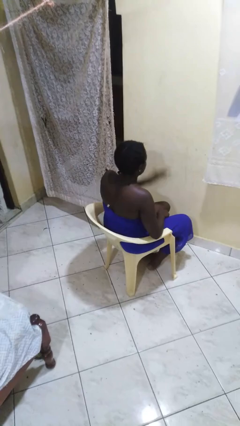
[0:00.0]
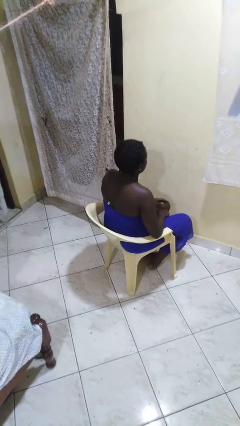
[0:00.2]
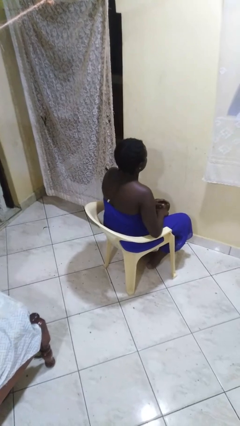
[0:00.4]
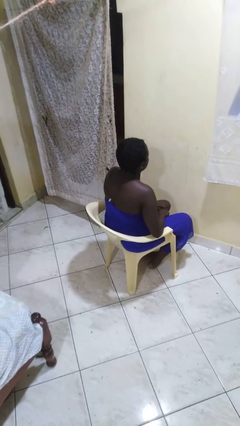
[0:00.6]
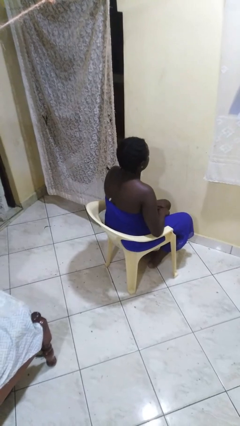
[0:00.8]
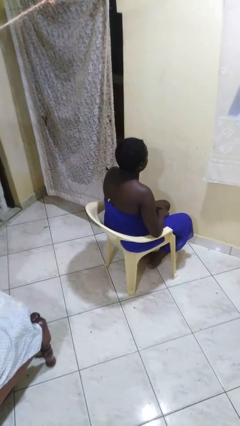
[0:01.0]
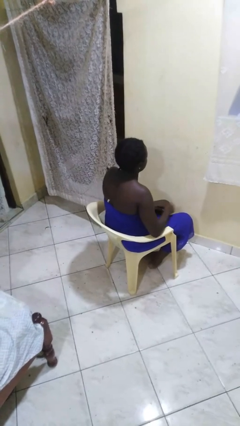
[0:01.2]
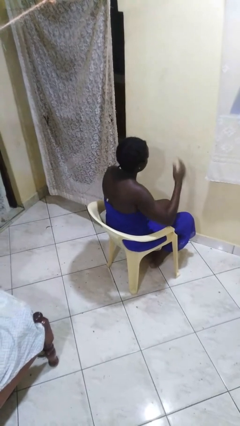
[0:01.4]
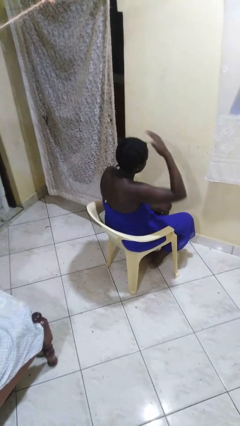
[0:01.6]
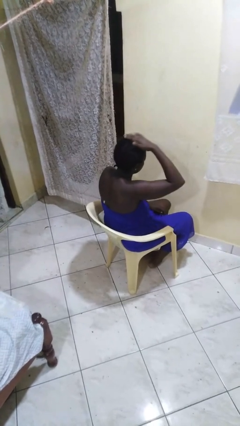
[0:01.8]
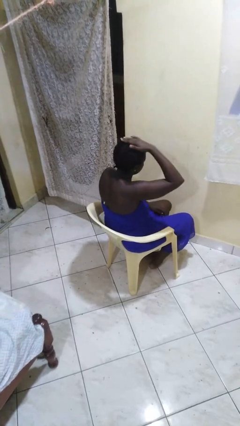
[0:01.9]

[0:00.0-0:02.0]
person pats head

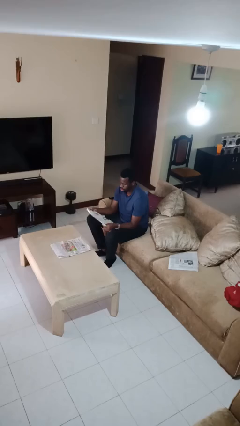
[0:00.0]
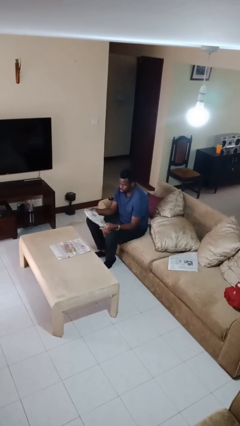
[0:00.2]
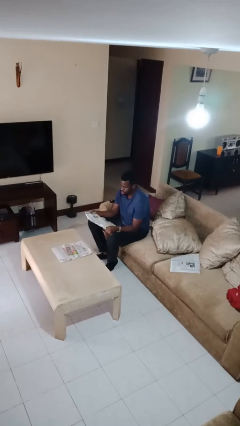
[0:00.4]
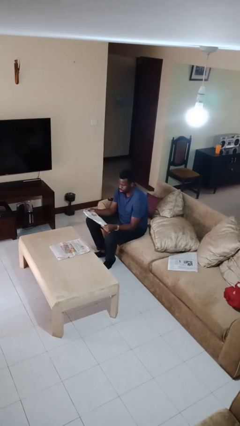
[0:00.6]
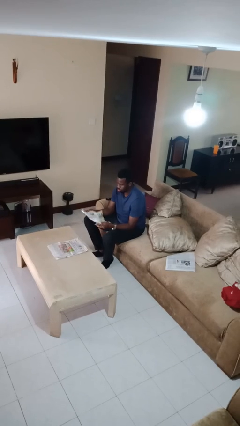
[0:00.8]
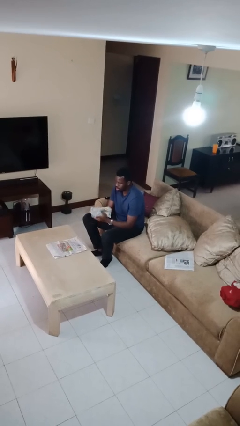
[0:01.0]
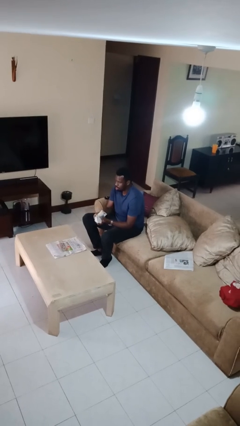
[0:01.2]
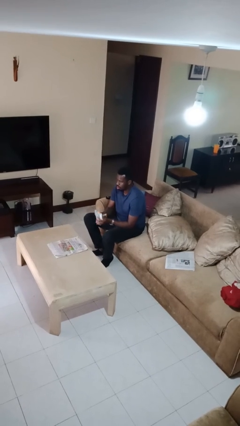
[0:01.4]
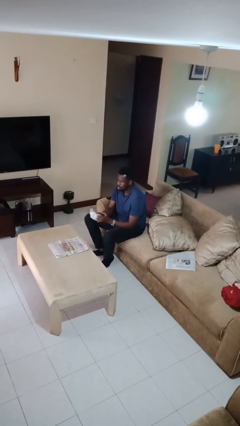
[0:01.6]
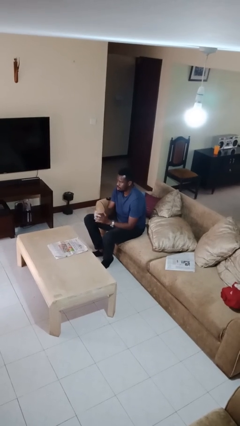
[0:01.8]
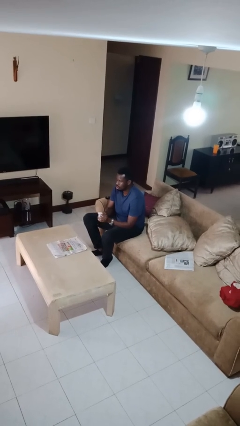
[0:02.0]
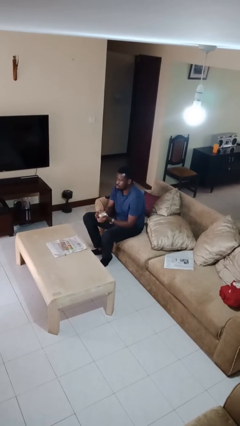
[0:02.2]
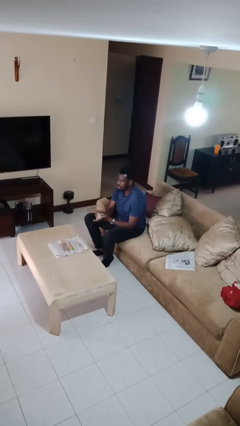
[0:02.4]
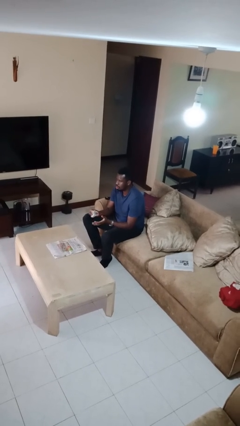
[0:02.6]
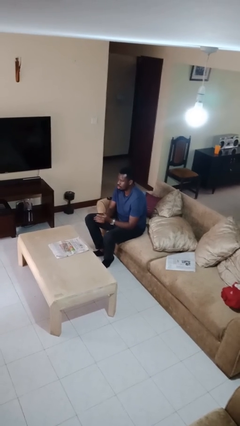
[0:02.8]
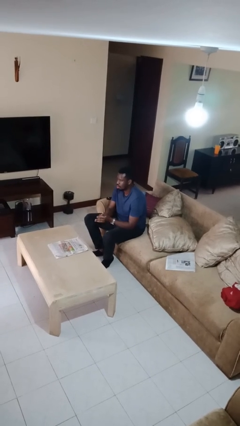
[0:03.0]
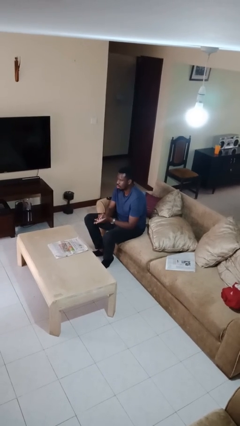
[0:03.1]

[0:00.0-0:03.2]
person crumples paper

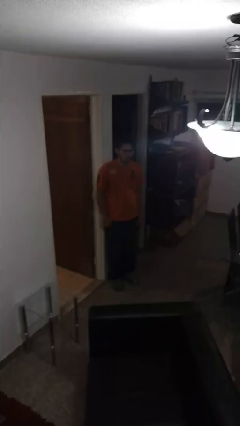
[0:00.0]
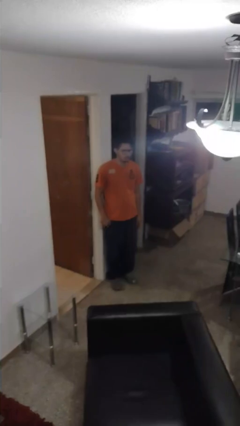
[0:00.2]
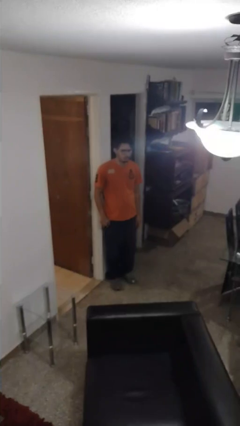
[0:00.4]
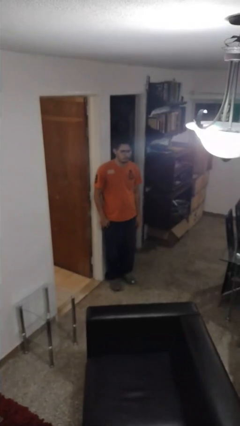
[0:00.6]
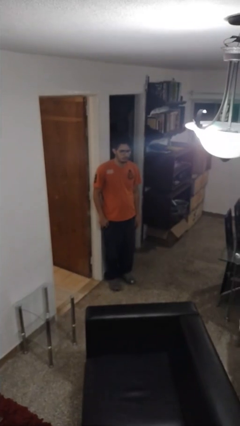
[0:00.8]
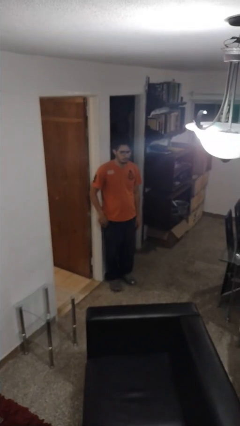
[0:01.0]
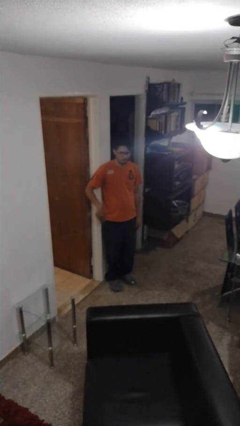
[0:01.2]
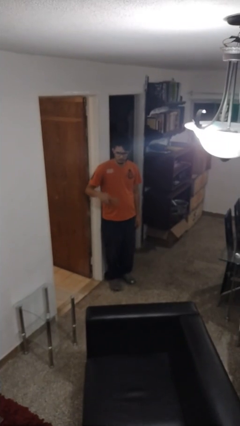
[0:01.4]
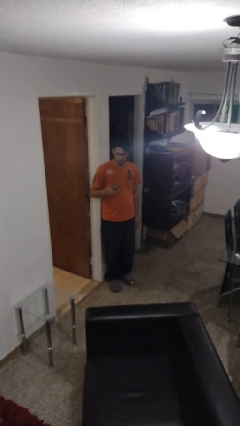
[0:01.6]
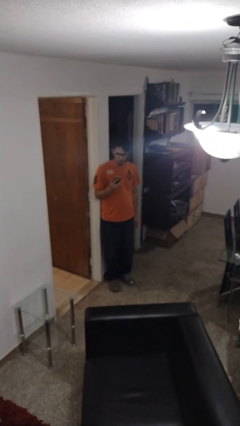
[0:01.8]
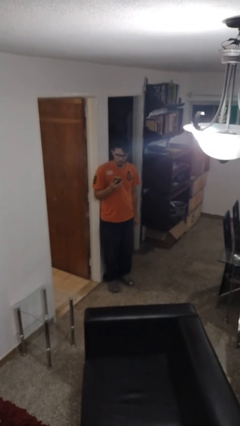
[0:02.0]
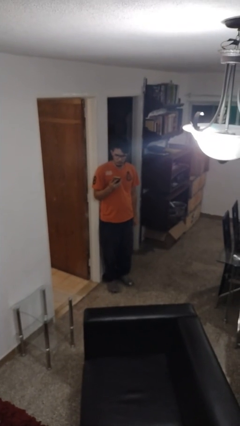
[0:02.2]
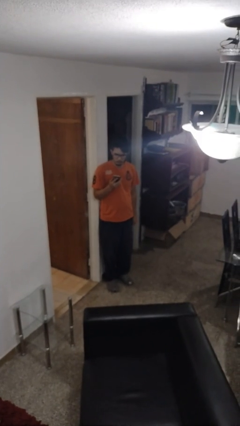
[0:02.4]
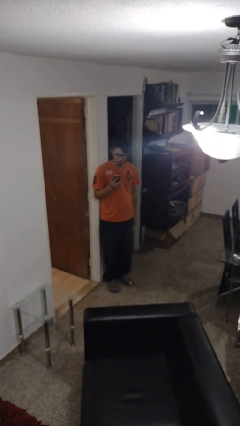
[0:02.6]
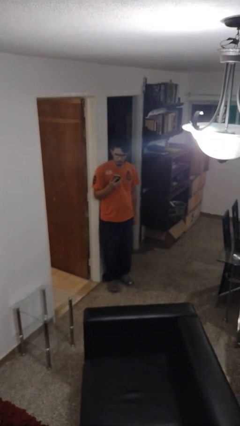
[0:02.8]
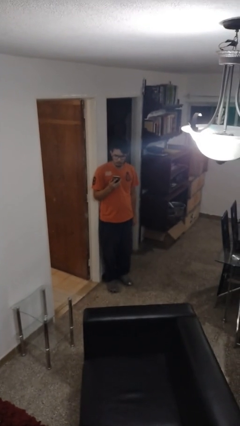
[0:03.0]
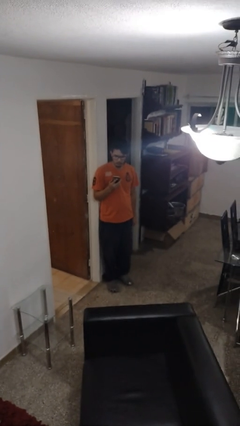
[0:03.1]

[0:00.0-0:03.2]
person takes phone from pocket

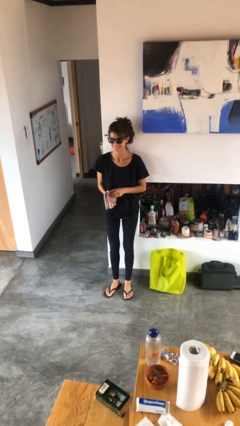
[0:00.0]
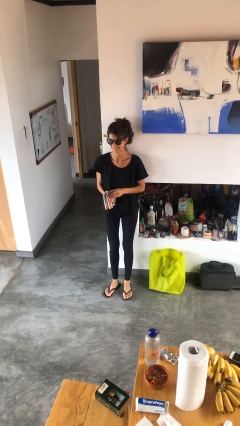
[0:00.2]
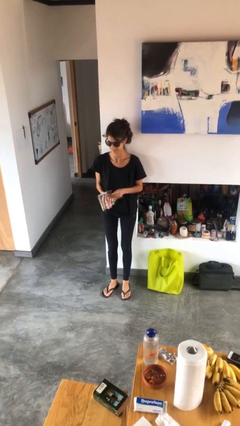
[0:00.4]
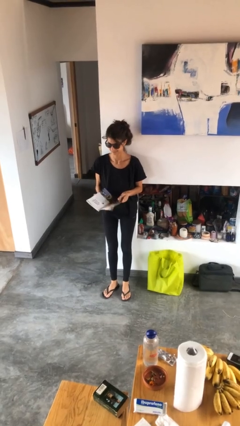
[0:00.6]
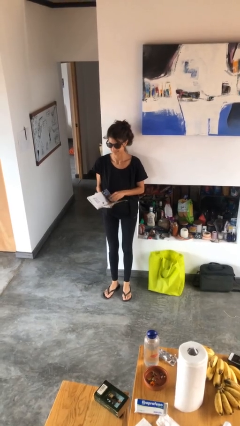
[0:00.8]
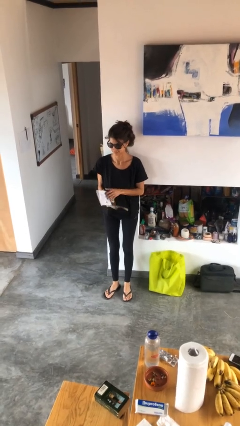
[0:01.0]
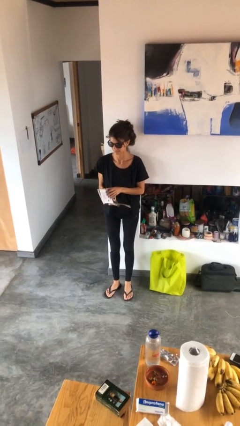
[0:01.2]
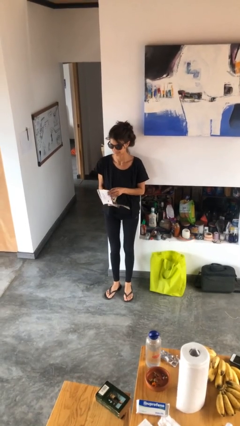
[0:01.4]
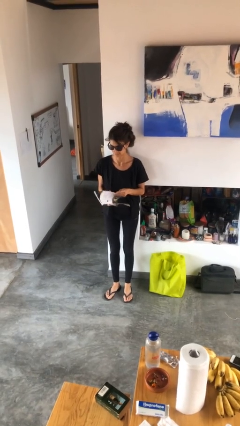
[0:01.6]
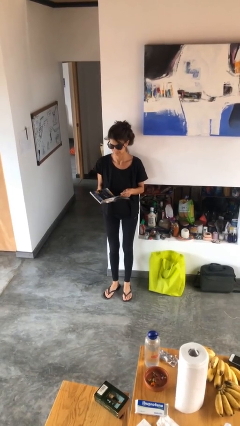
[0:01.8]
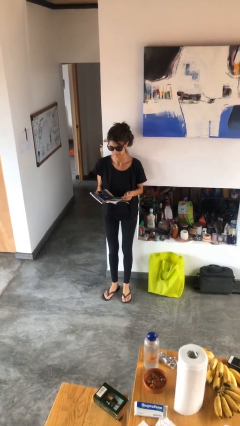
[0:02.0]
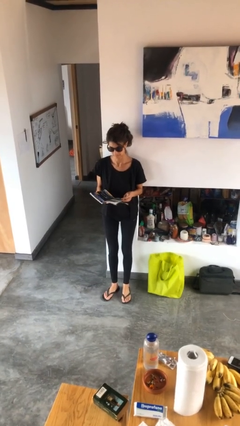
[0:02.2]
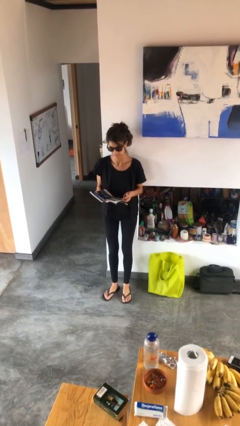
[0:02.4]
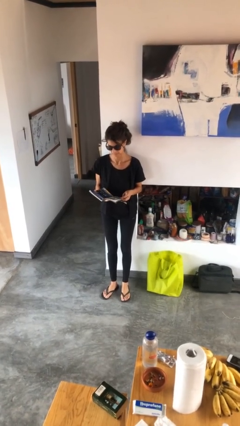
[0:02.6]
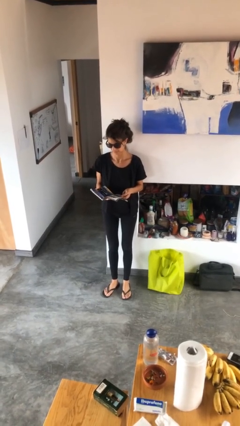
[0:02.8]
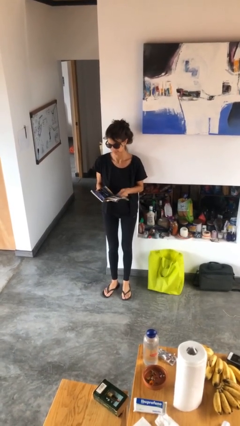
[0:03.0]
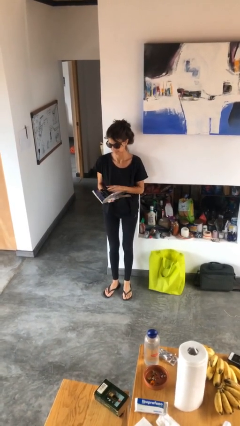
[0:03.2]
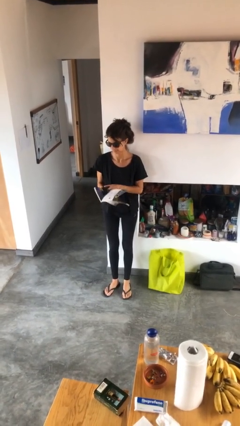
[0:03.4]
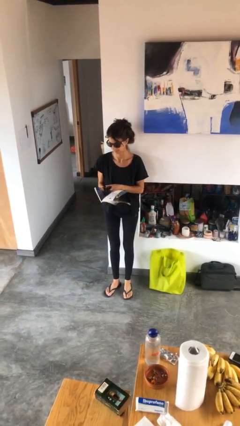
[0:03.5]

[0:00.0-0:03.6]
person reads magazine

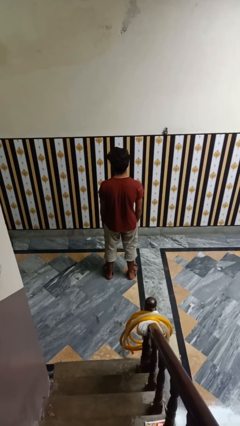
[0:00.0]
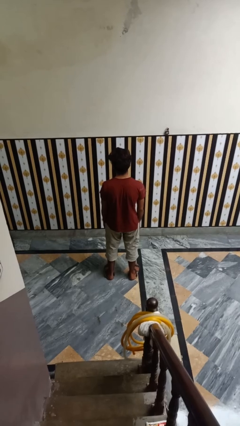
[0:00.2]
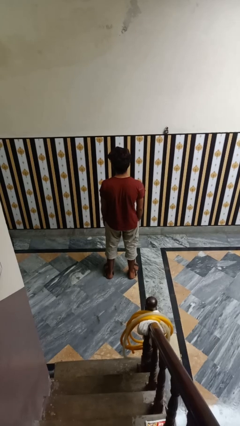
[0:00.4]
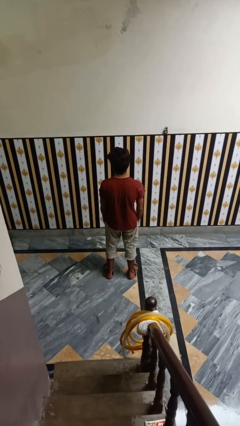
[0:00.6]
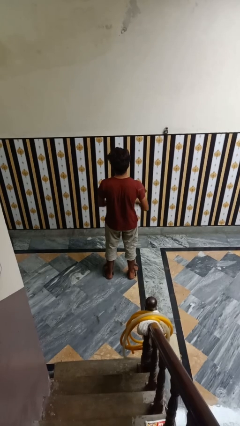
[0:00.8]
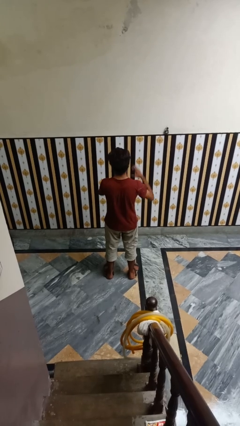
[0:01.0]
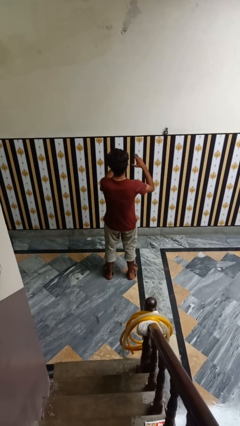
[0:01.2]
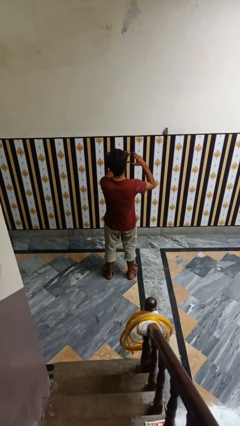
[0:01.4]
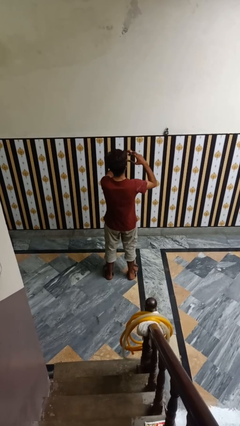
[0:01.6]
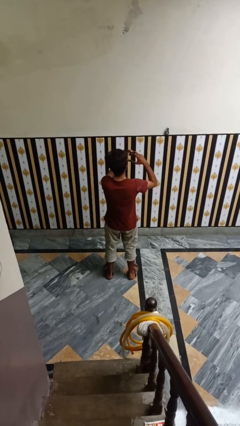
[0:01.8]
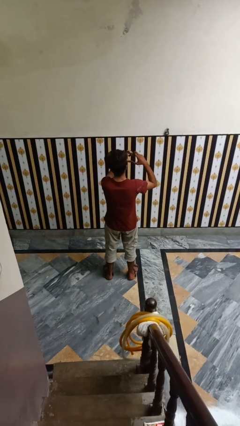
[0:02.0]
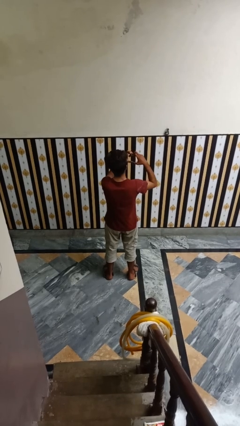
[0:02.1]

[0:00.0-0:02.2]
person gestures heart

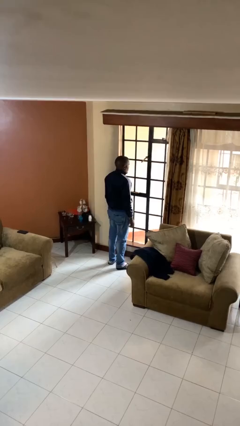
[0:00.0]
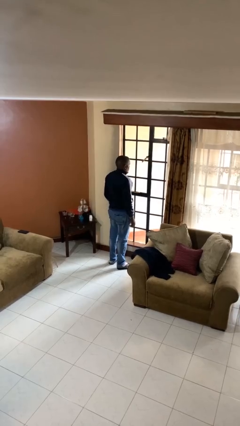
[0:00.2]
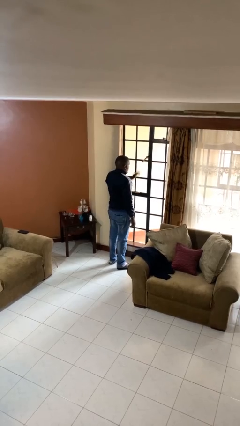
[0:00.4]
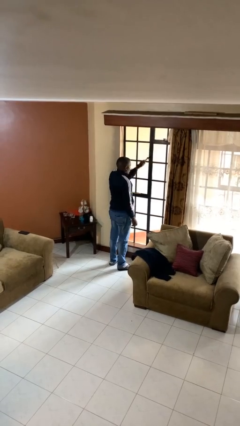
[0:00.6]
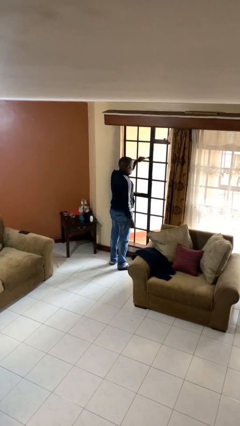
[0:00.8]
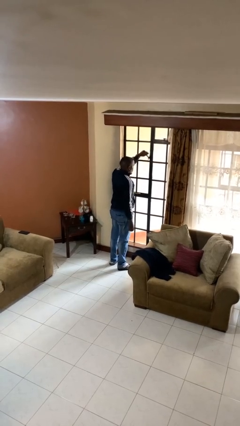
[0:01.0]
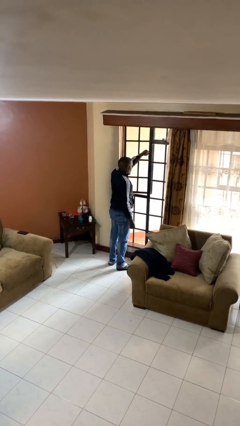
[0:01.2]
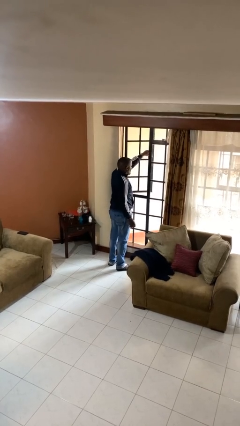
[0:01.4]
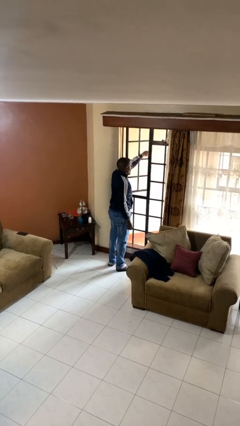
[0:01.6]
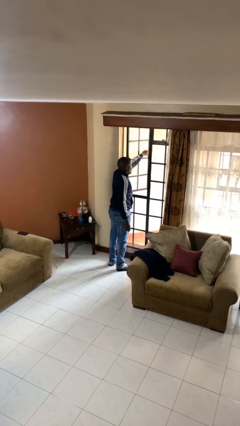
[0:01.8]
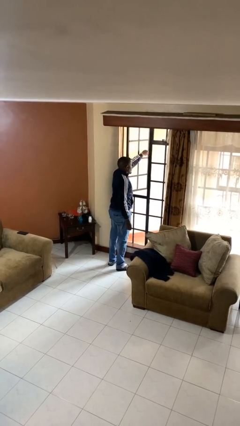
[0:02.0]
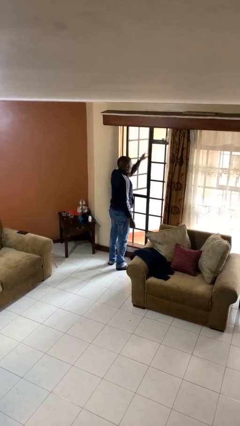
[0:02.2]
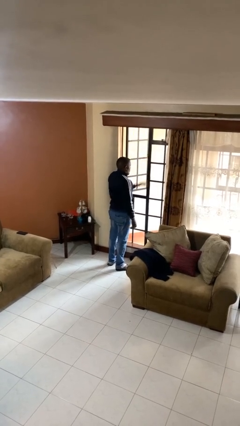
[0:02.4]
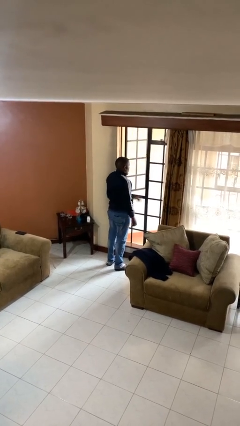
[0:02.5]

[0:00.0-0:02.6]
person opens home window

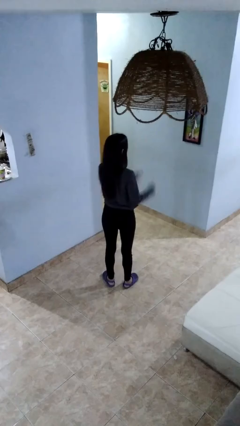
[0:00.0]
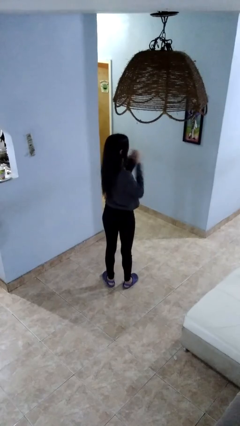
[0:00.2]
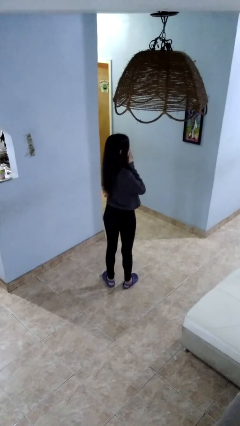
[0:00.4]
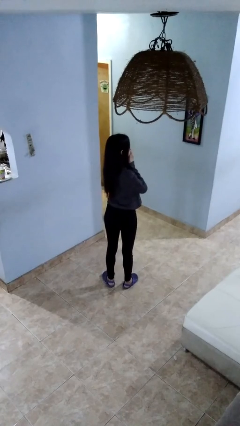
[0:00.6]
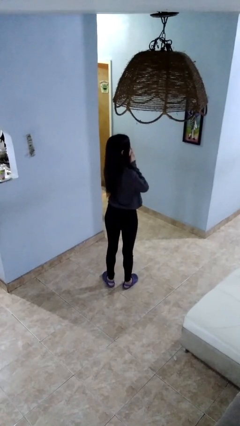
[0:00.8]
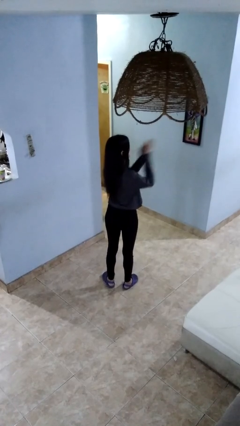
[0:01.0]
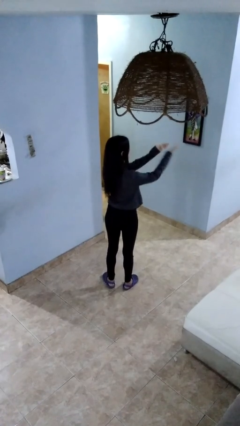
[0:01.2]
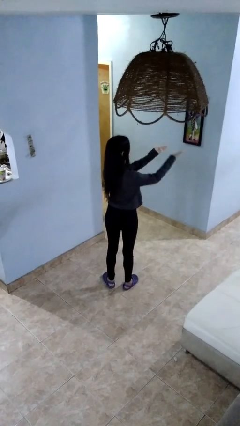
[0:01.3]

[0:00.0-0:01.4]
person gestures blow kiss
